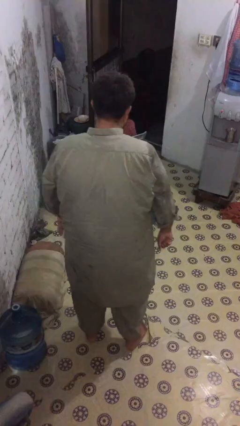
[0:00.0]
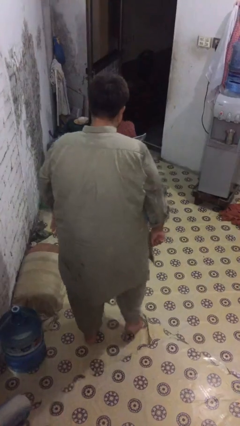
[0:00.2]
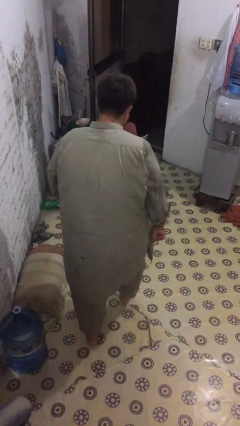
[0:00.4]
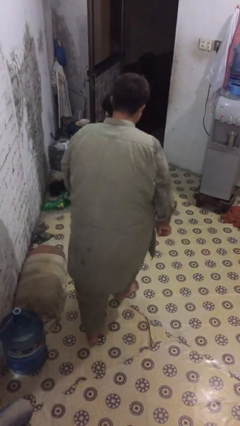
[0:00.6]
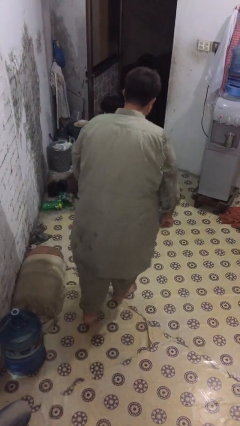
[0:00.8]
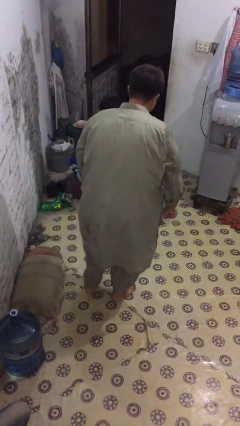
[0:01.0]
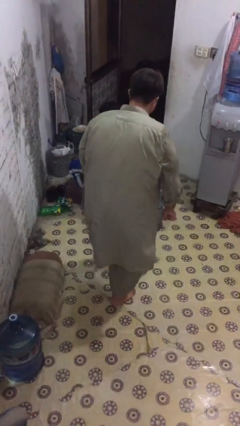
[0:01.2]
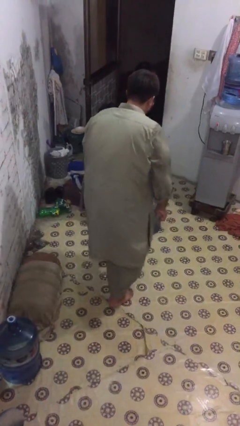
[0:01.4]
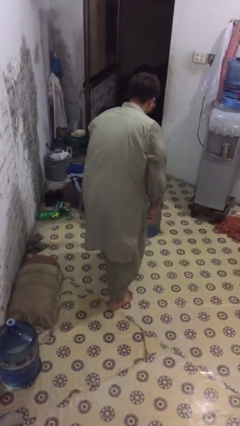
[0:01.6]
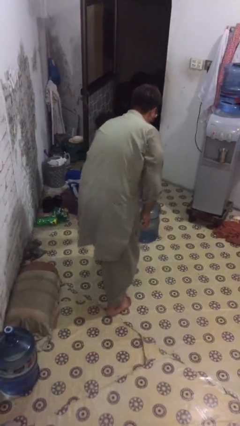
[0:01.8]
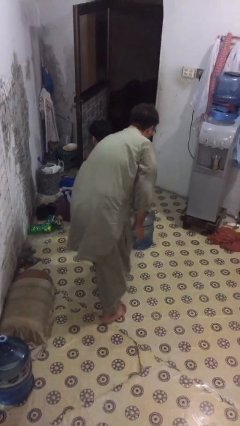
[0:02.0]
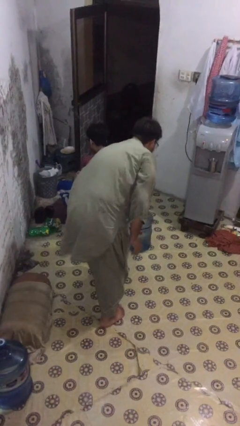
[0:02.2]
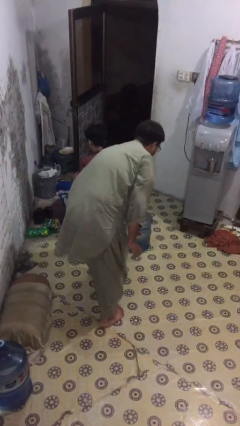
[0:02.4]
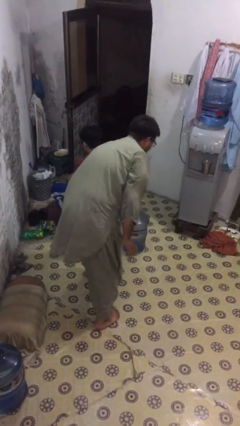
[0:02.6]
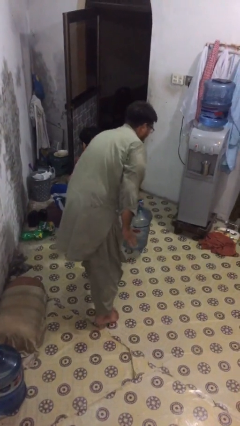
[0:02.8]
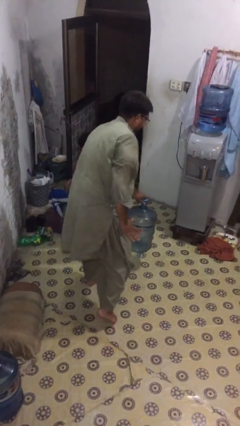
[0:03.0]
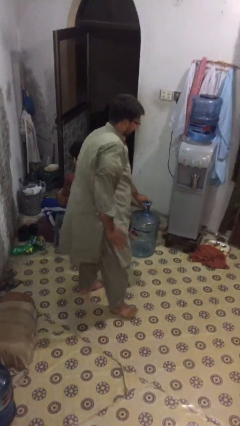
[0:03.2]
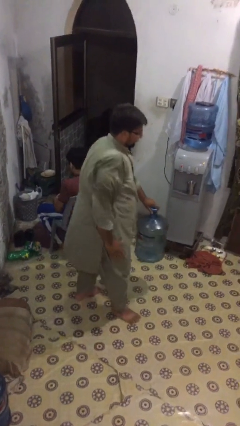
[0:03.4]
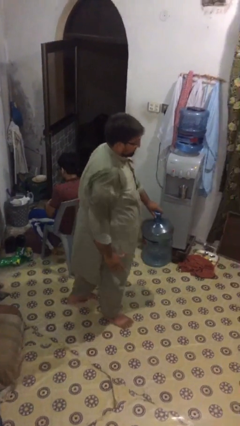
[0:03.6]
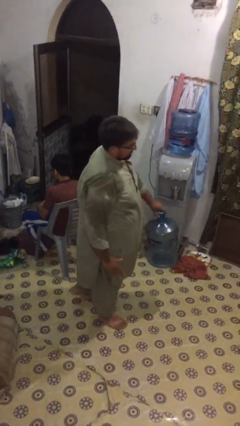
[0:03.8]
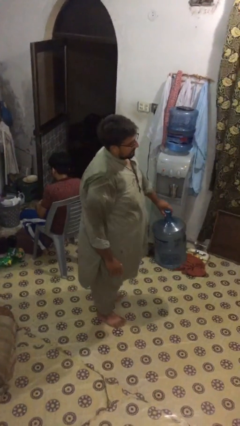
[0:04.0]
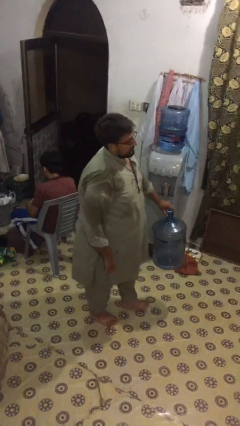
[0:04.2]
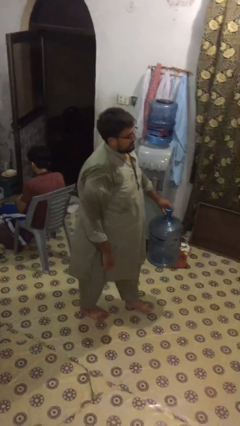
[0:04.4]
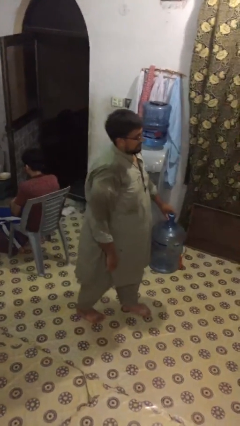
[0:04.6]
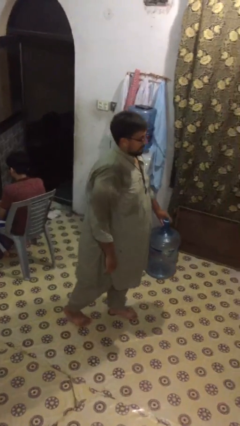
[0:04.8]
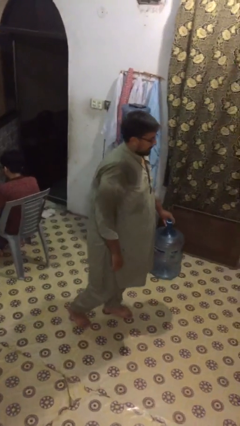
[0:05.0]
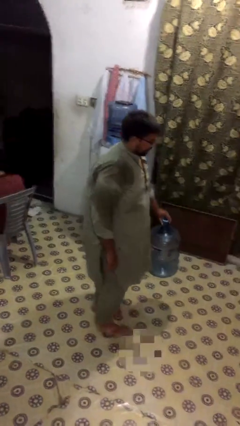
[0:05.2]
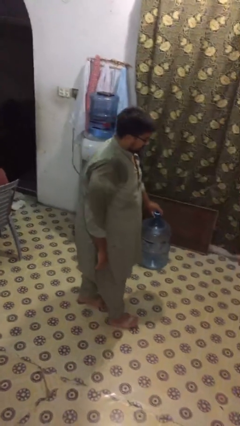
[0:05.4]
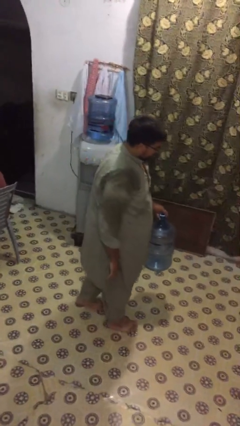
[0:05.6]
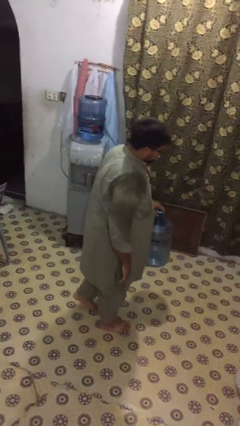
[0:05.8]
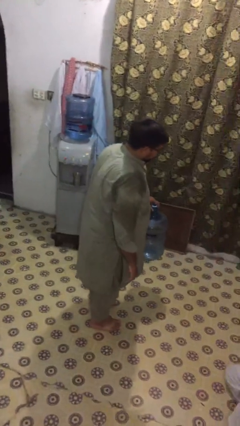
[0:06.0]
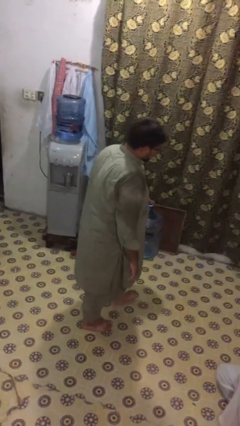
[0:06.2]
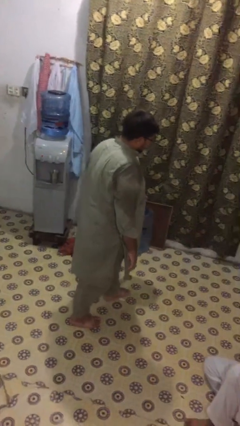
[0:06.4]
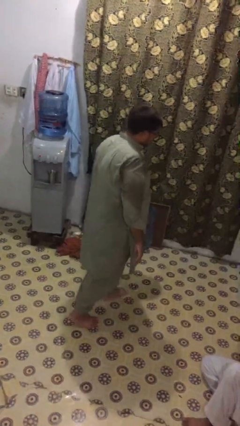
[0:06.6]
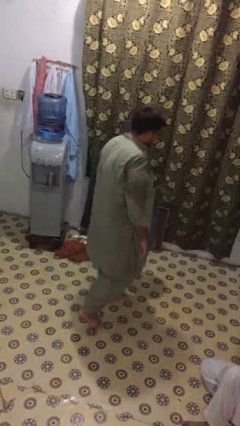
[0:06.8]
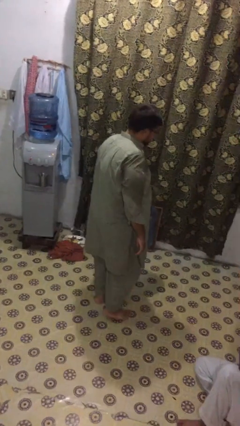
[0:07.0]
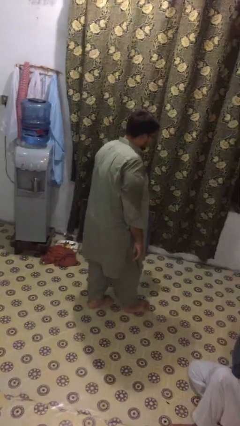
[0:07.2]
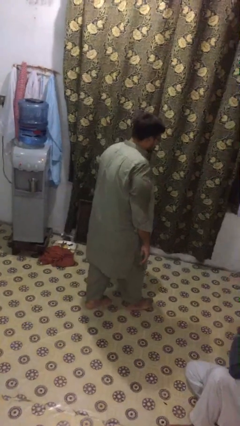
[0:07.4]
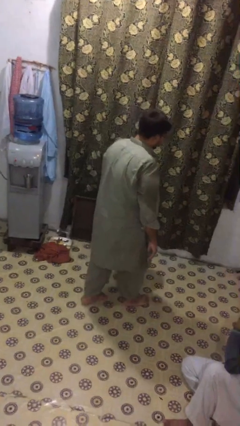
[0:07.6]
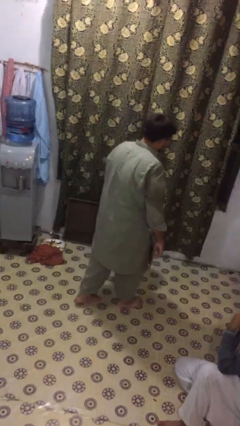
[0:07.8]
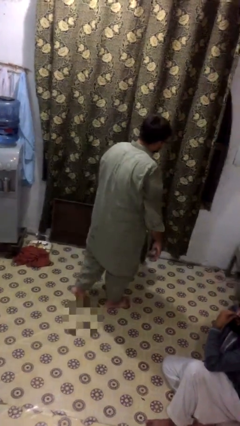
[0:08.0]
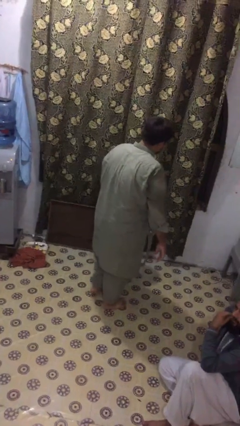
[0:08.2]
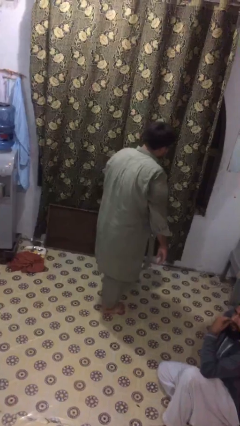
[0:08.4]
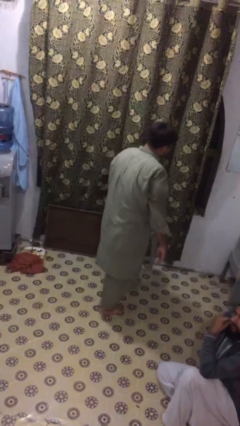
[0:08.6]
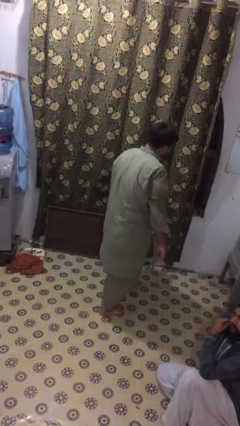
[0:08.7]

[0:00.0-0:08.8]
person steals object from person

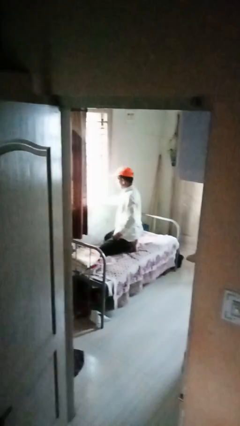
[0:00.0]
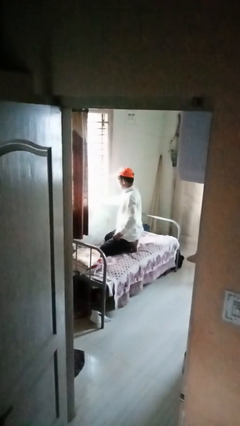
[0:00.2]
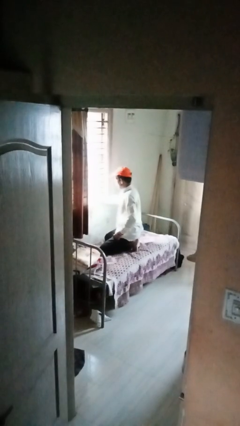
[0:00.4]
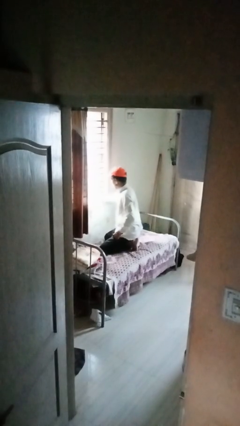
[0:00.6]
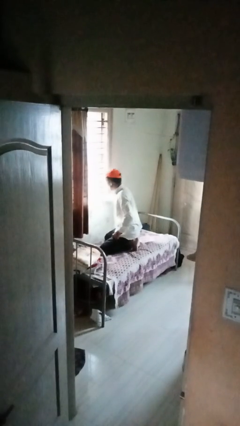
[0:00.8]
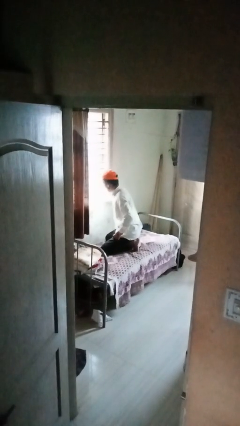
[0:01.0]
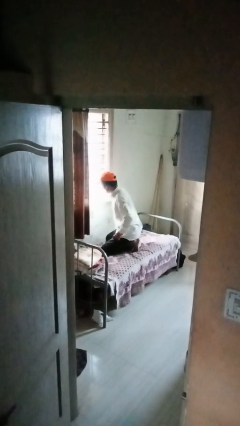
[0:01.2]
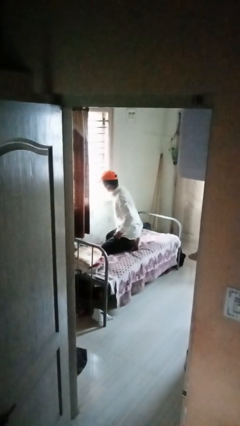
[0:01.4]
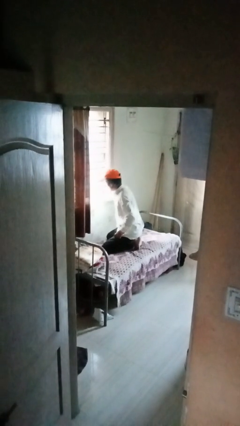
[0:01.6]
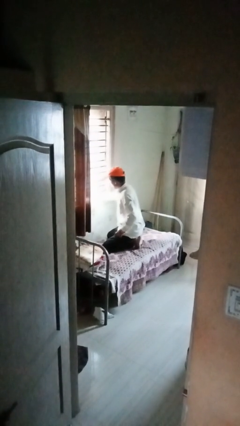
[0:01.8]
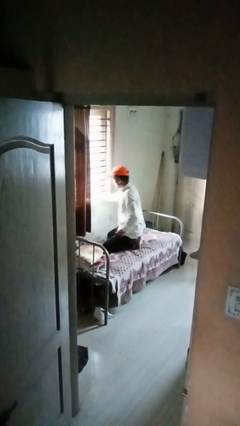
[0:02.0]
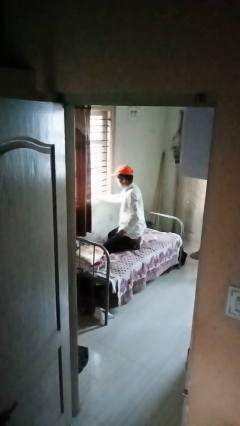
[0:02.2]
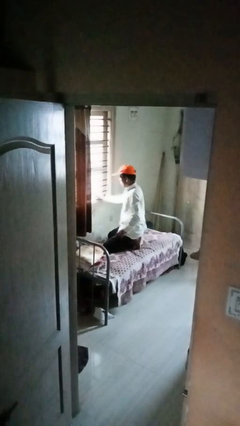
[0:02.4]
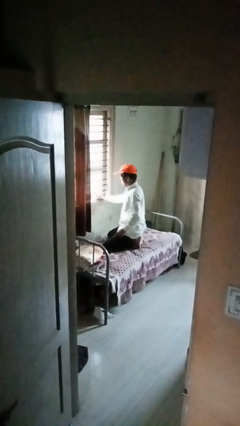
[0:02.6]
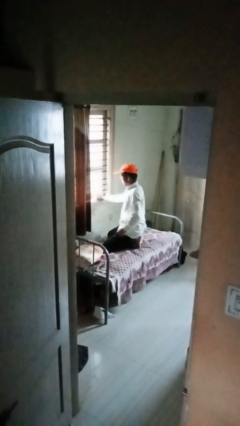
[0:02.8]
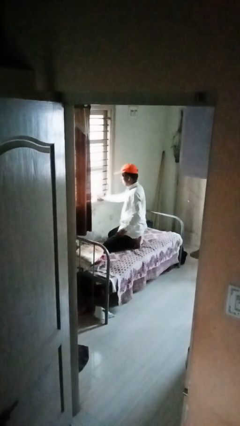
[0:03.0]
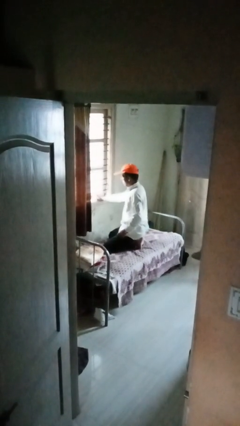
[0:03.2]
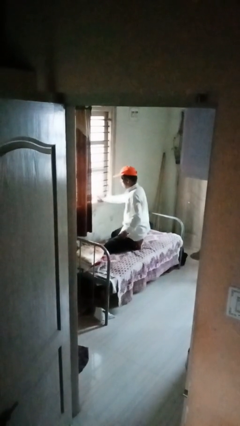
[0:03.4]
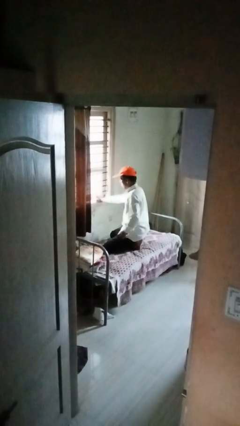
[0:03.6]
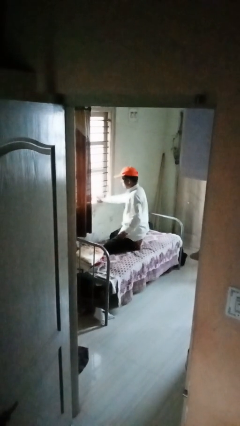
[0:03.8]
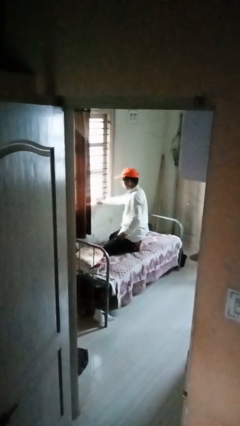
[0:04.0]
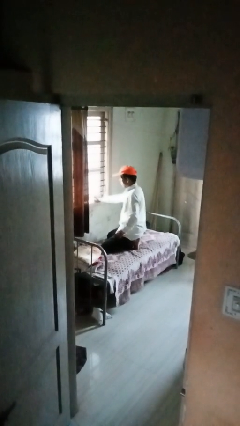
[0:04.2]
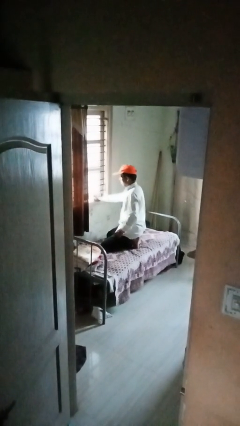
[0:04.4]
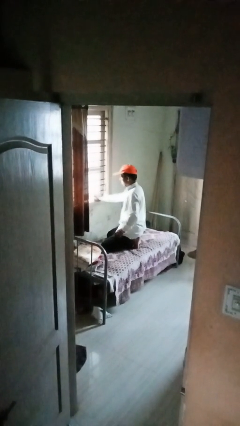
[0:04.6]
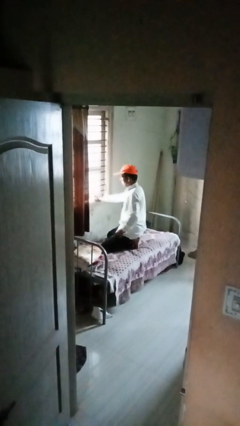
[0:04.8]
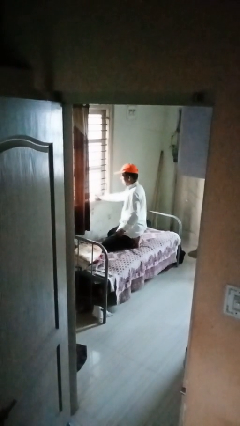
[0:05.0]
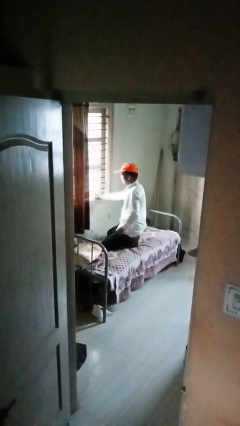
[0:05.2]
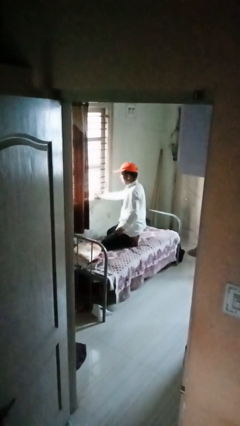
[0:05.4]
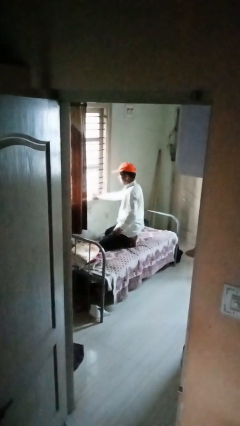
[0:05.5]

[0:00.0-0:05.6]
person closes home window

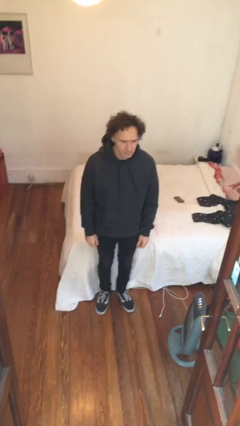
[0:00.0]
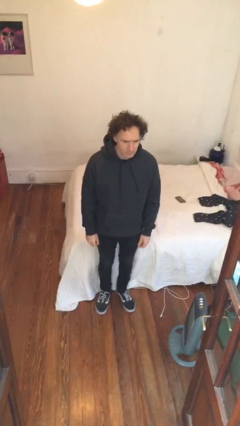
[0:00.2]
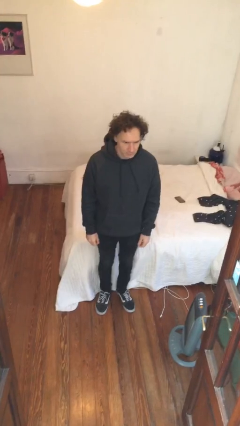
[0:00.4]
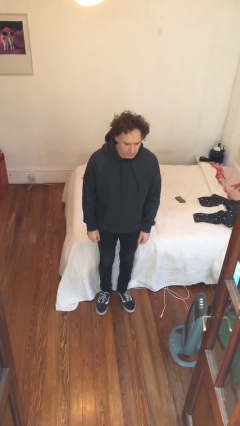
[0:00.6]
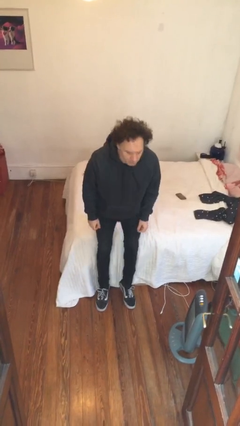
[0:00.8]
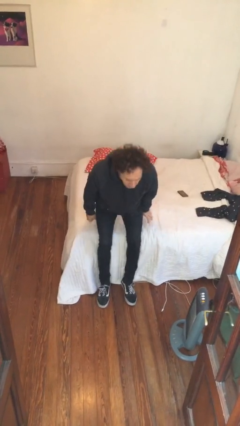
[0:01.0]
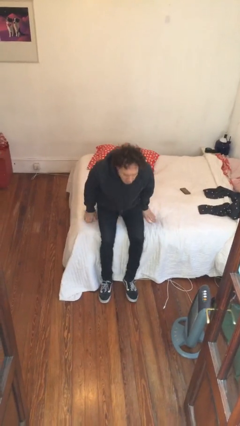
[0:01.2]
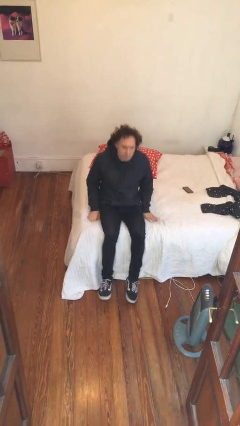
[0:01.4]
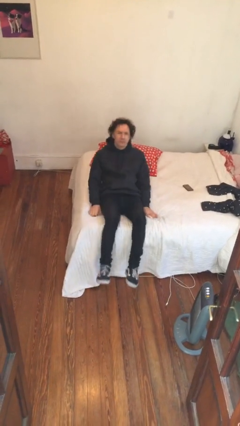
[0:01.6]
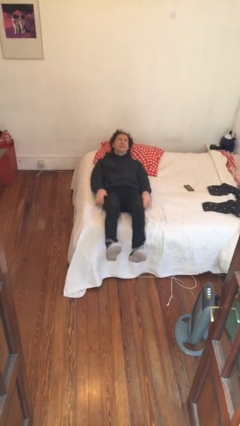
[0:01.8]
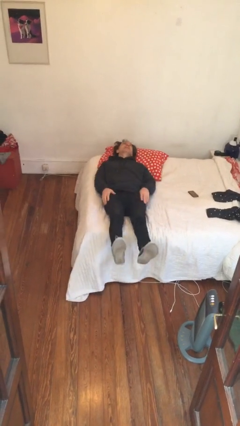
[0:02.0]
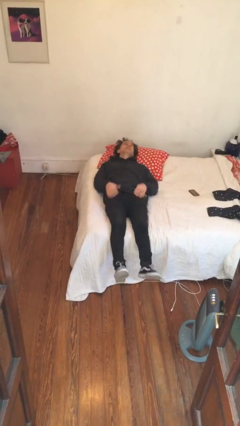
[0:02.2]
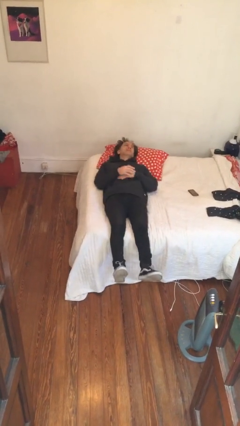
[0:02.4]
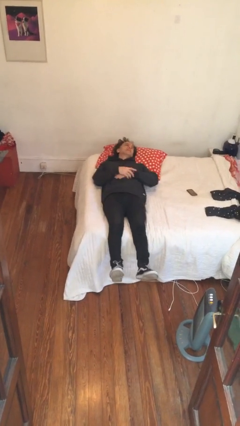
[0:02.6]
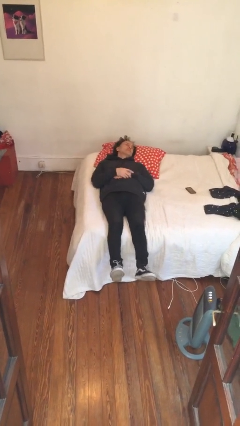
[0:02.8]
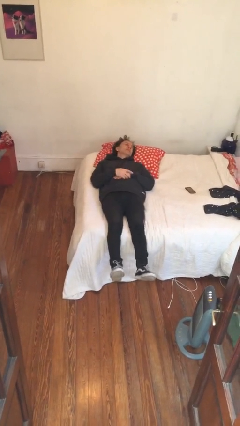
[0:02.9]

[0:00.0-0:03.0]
person lies down on bed

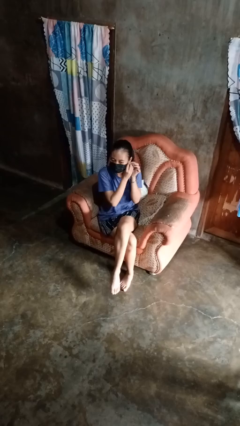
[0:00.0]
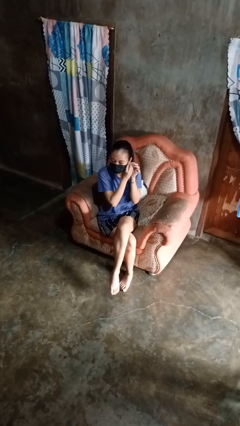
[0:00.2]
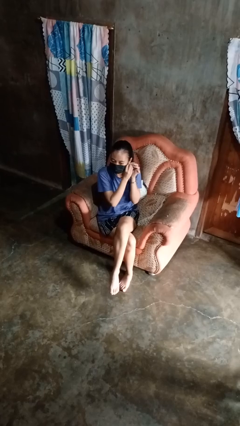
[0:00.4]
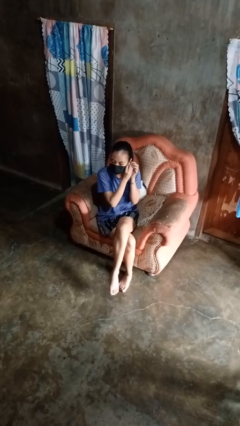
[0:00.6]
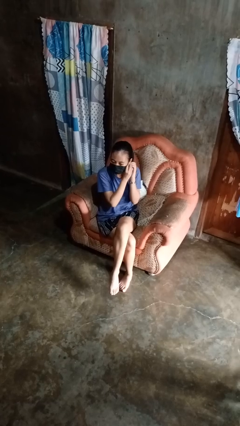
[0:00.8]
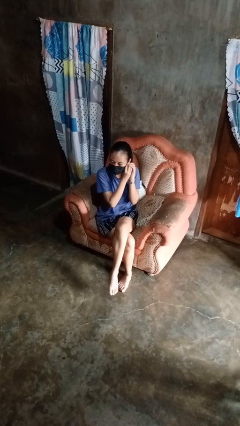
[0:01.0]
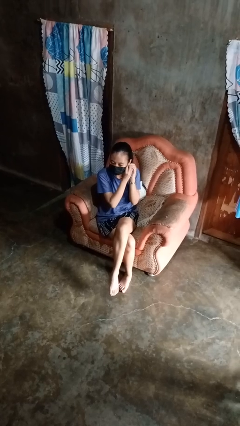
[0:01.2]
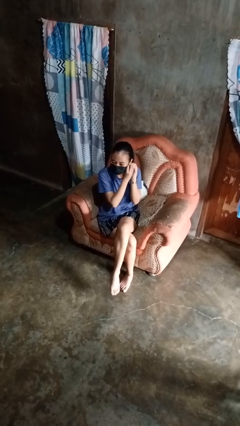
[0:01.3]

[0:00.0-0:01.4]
person puts on earrings
